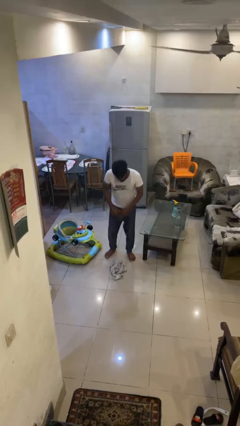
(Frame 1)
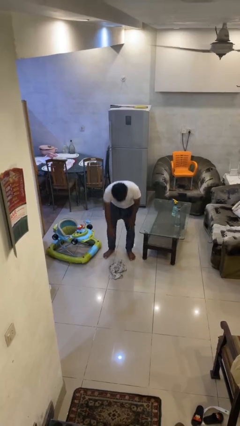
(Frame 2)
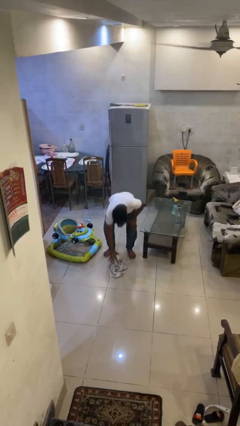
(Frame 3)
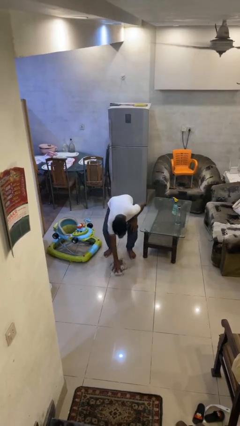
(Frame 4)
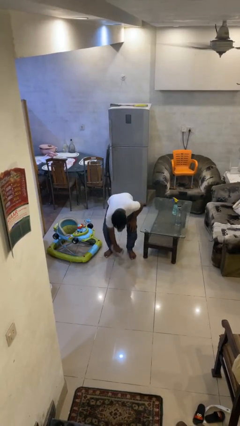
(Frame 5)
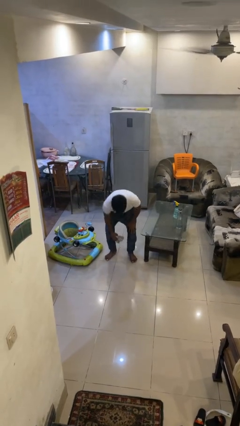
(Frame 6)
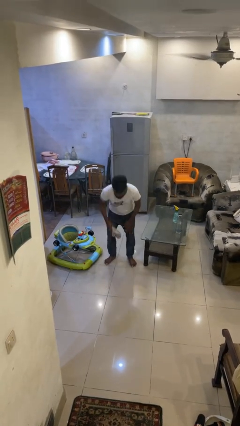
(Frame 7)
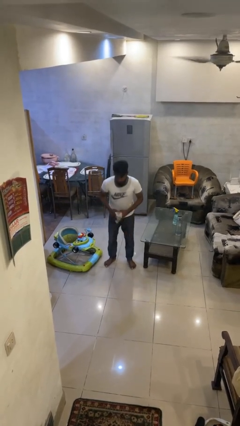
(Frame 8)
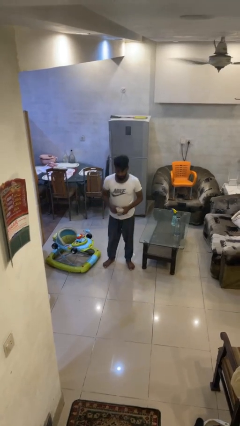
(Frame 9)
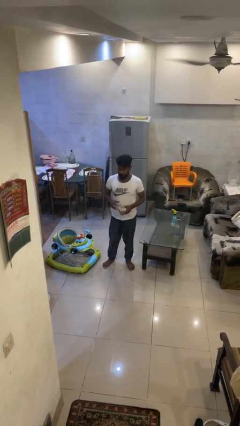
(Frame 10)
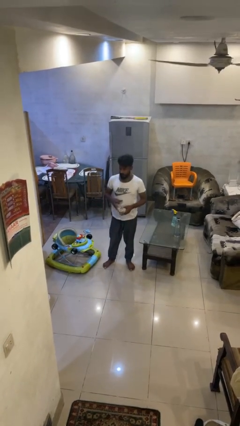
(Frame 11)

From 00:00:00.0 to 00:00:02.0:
person picks up object from floor

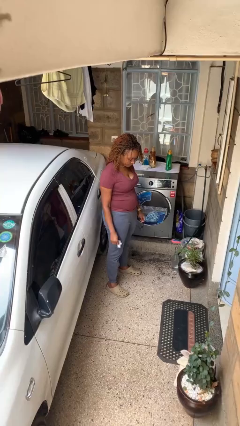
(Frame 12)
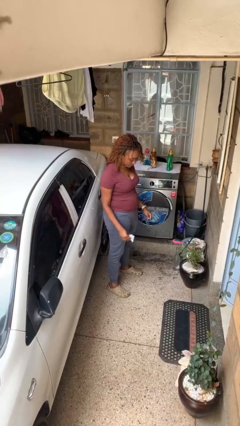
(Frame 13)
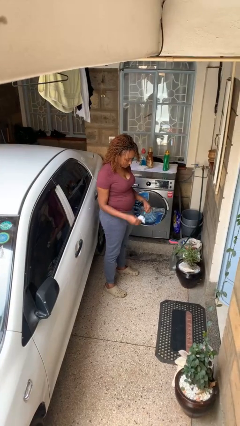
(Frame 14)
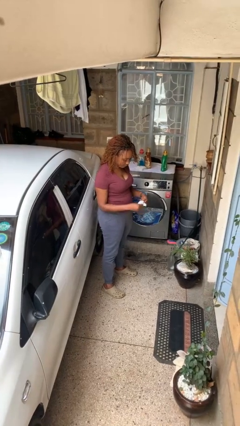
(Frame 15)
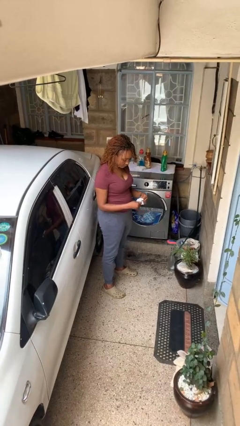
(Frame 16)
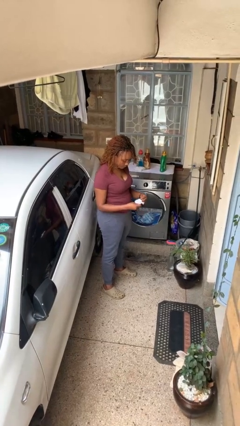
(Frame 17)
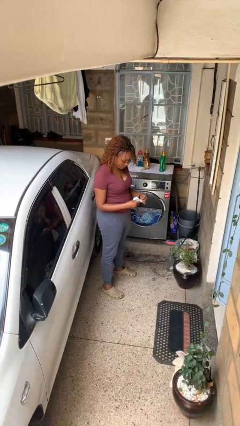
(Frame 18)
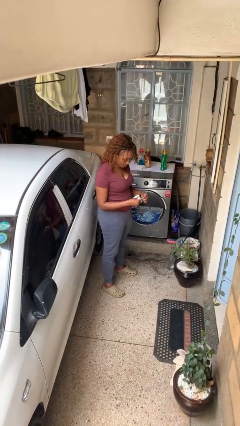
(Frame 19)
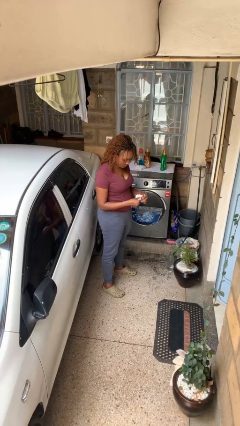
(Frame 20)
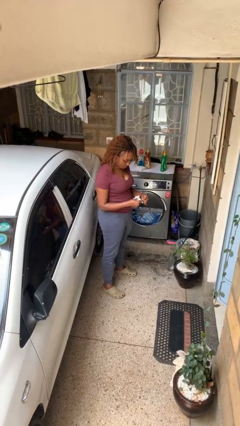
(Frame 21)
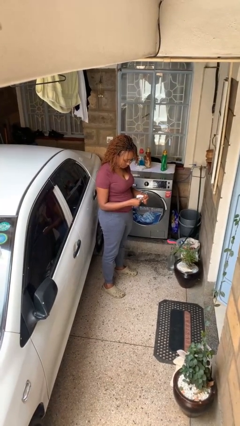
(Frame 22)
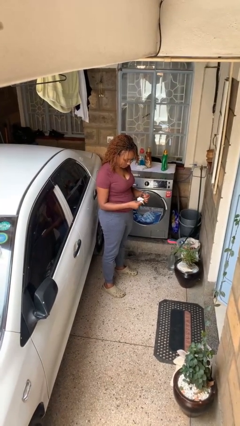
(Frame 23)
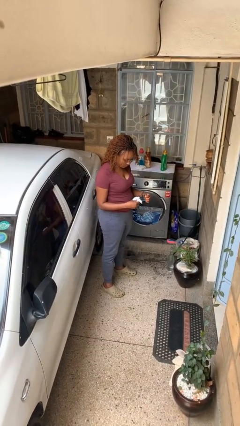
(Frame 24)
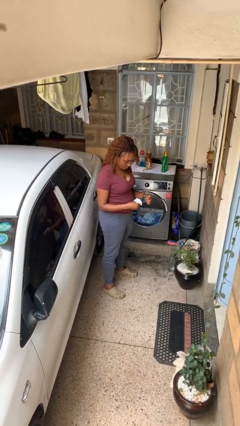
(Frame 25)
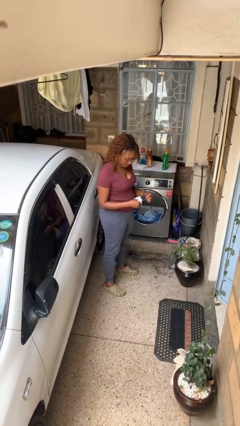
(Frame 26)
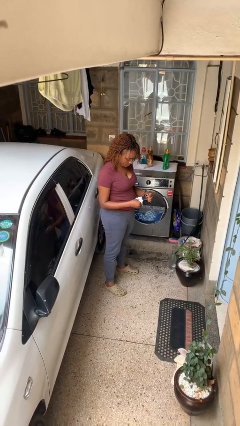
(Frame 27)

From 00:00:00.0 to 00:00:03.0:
person cleans eyeglasses

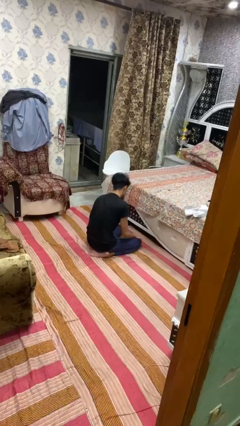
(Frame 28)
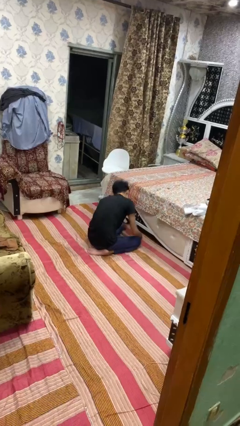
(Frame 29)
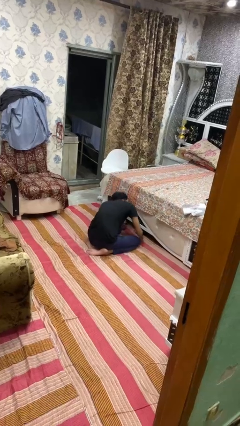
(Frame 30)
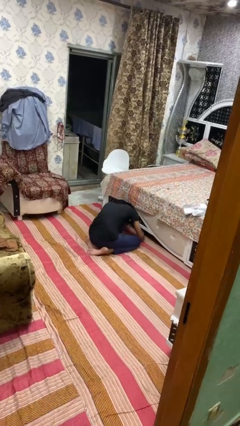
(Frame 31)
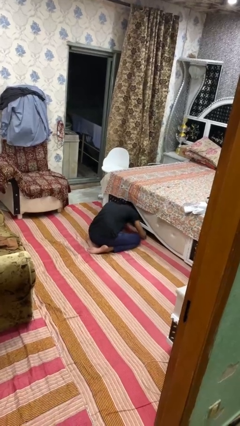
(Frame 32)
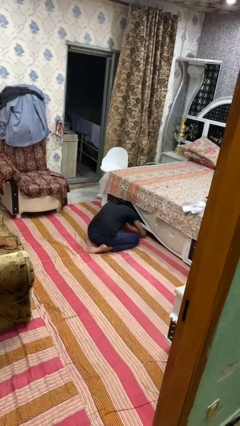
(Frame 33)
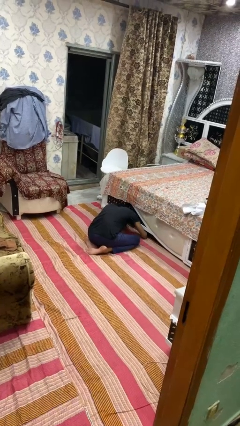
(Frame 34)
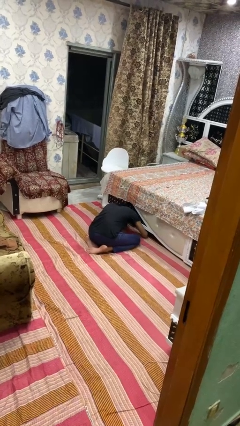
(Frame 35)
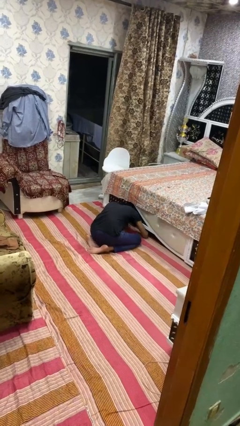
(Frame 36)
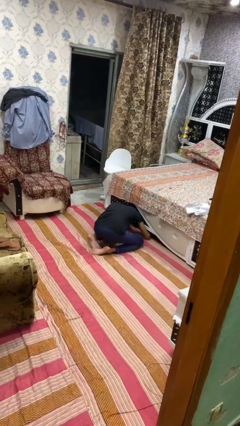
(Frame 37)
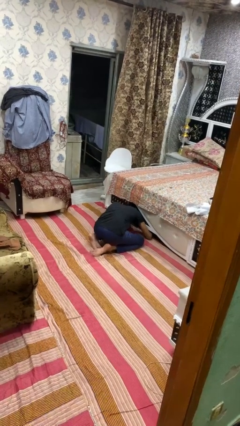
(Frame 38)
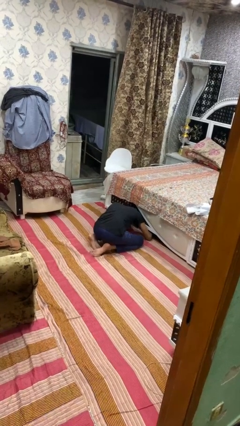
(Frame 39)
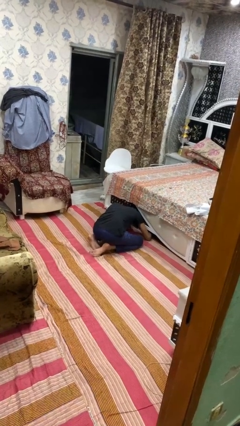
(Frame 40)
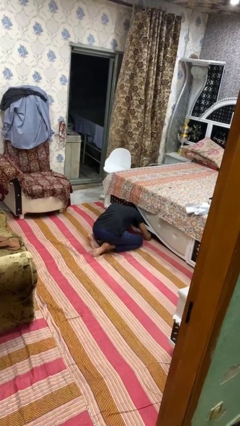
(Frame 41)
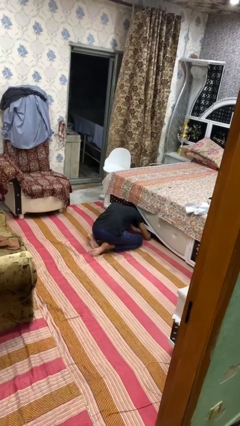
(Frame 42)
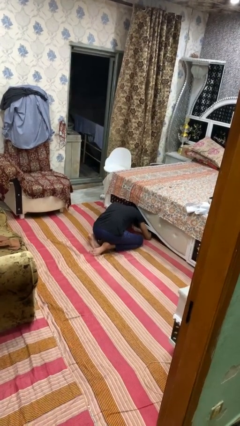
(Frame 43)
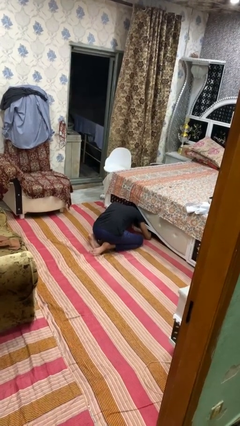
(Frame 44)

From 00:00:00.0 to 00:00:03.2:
person searches under bed

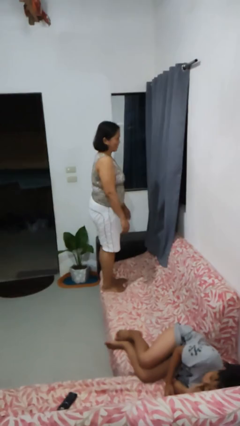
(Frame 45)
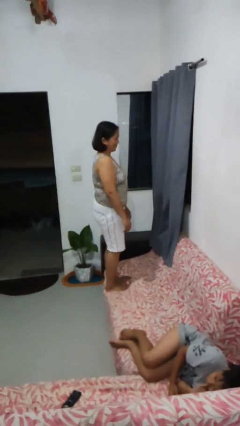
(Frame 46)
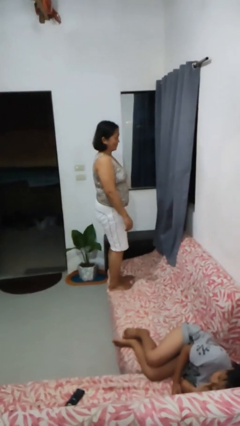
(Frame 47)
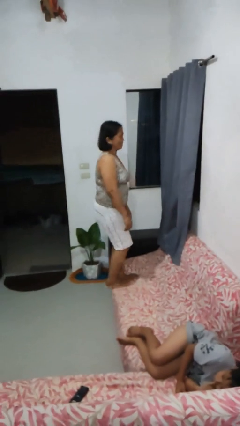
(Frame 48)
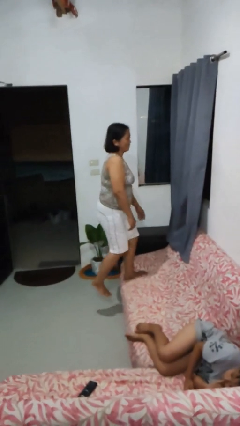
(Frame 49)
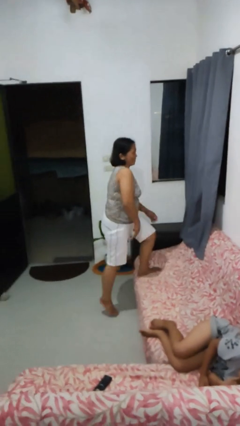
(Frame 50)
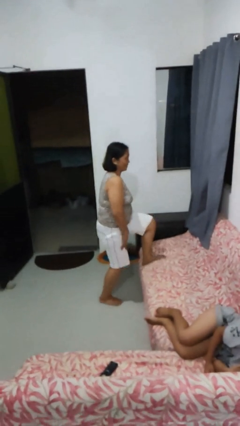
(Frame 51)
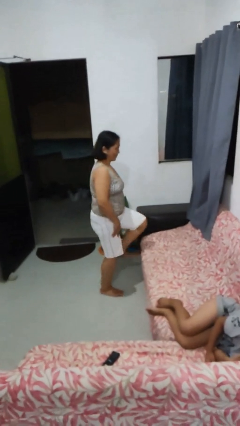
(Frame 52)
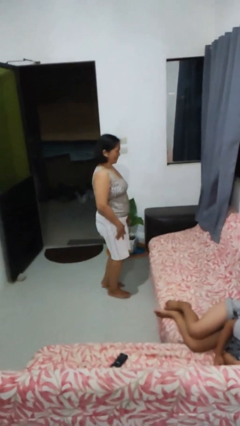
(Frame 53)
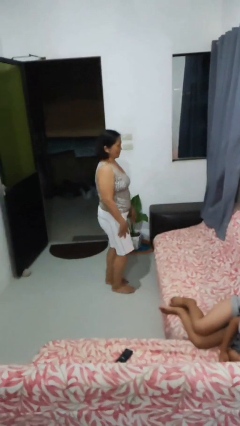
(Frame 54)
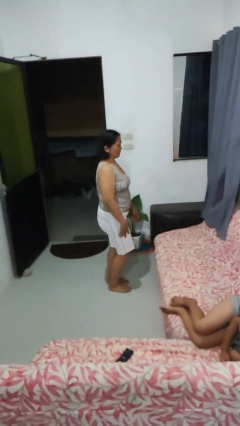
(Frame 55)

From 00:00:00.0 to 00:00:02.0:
person climbs off couch

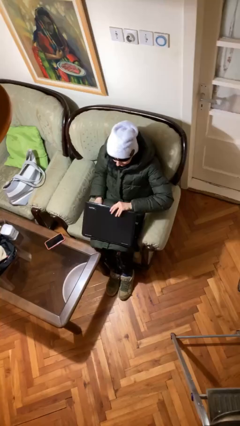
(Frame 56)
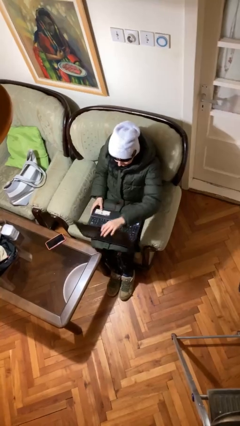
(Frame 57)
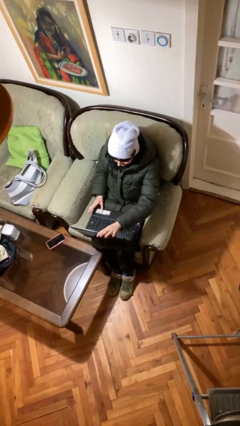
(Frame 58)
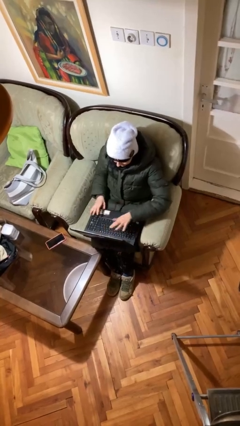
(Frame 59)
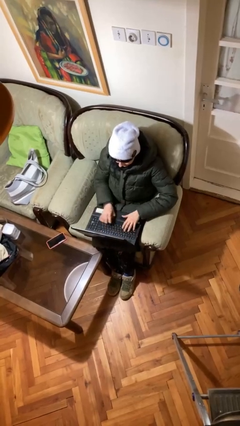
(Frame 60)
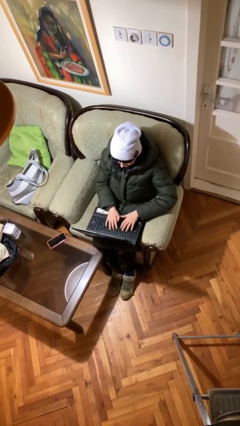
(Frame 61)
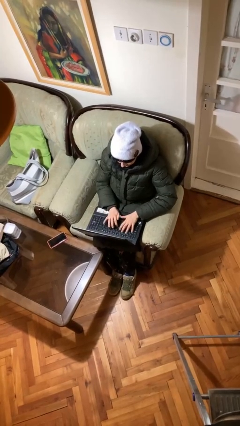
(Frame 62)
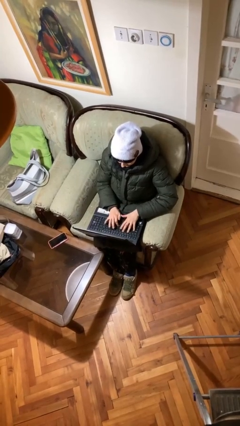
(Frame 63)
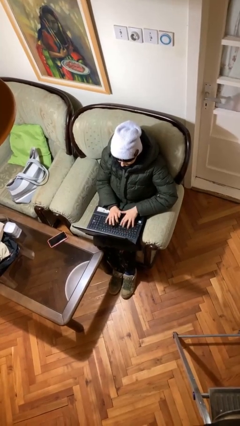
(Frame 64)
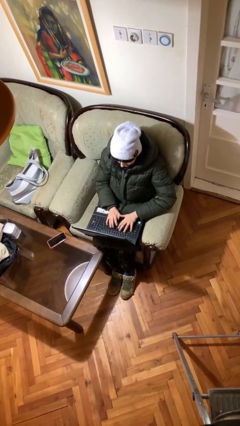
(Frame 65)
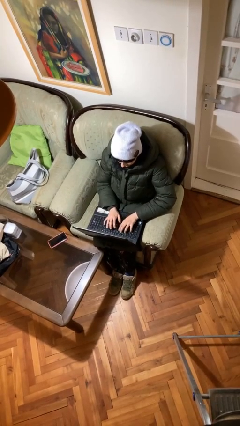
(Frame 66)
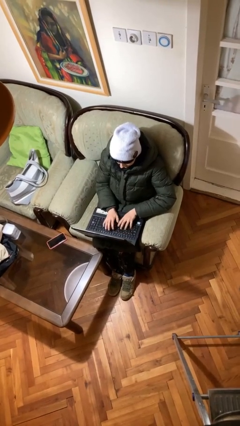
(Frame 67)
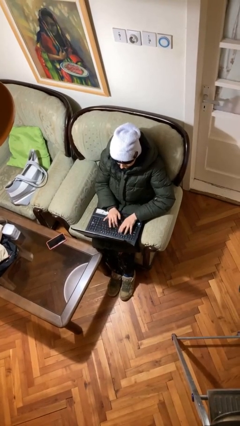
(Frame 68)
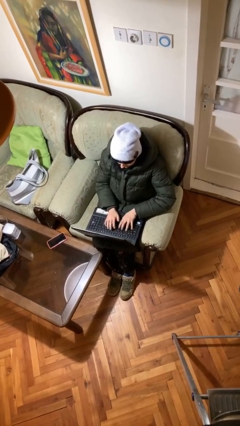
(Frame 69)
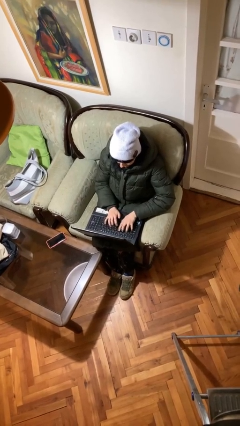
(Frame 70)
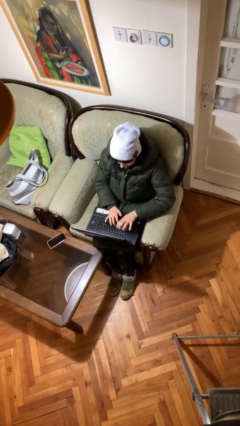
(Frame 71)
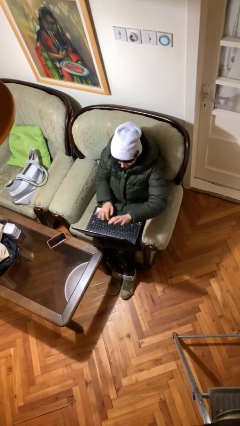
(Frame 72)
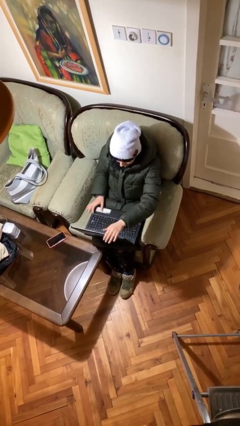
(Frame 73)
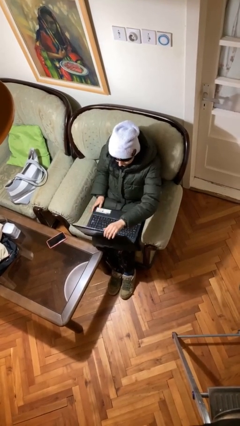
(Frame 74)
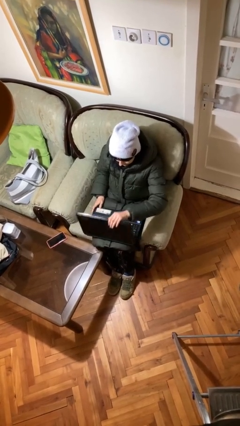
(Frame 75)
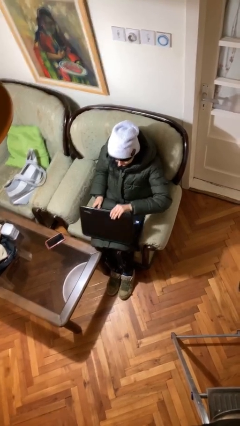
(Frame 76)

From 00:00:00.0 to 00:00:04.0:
person interacts with laptop

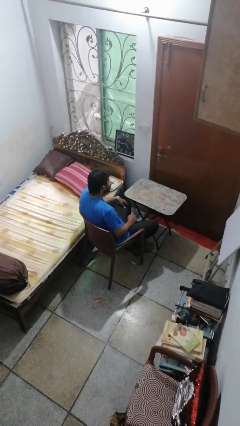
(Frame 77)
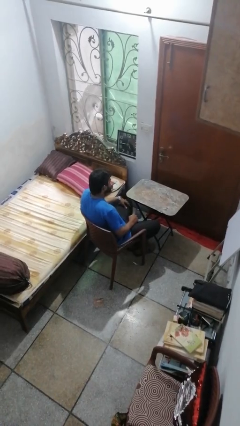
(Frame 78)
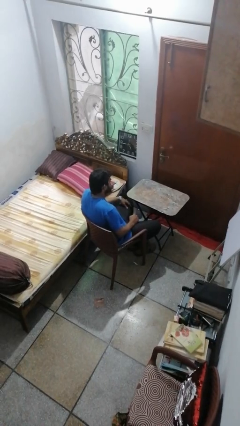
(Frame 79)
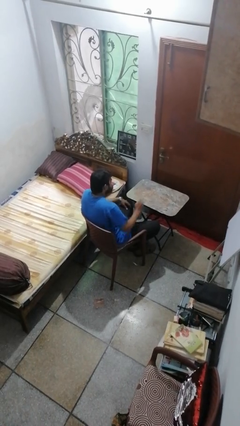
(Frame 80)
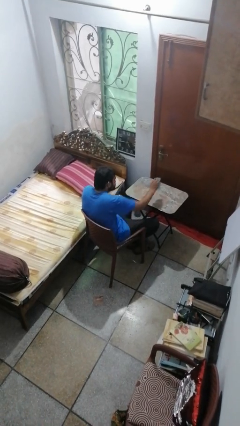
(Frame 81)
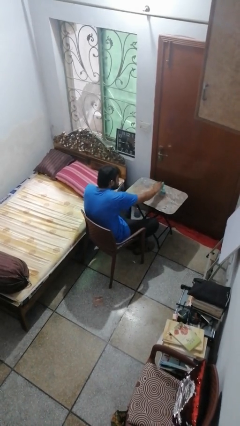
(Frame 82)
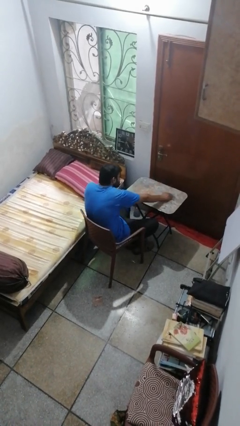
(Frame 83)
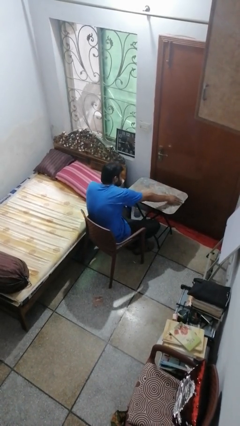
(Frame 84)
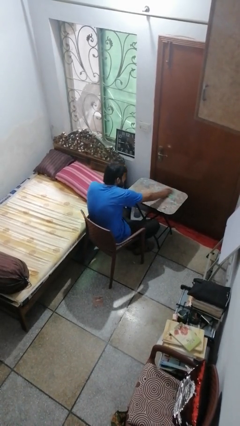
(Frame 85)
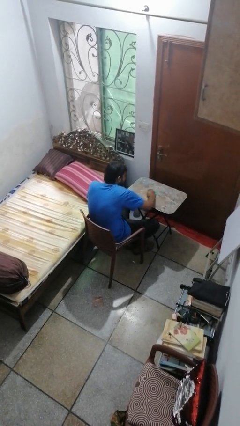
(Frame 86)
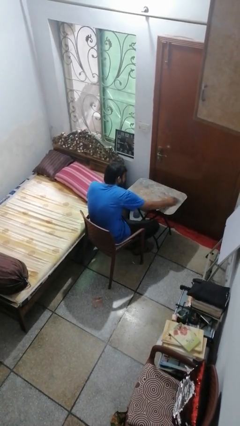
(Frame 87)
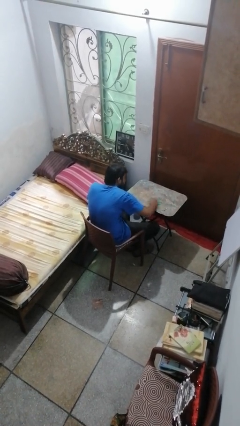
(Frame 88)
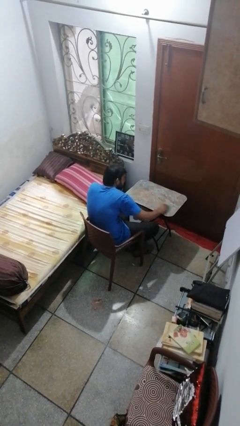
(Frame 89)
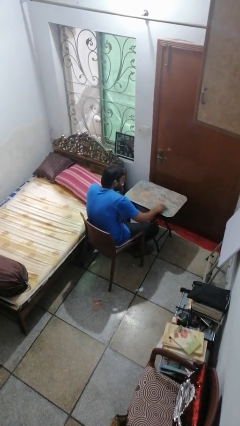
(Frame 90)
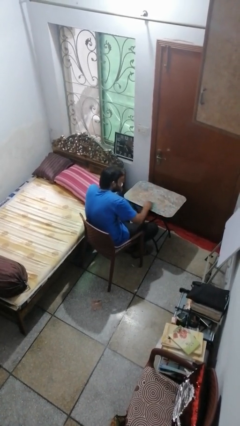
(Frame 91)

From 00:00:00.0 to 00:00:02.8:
person cleans table with rag

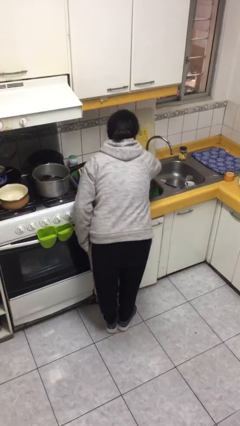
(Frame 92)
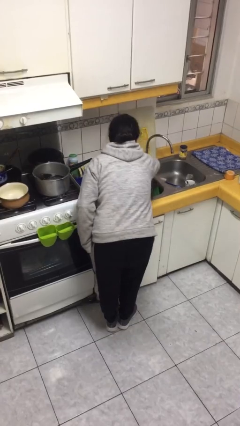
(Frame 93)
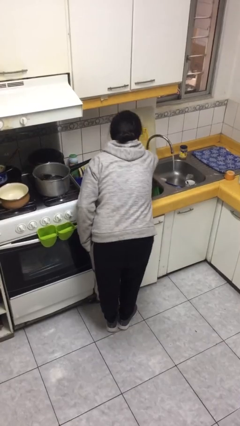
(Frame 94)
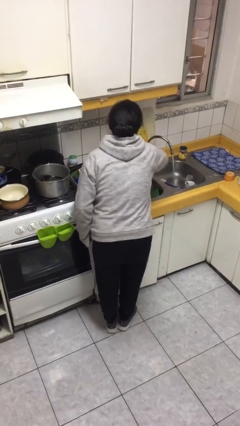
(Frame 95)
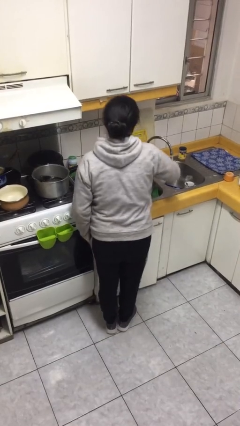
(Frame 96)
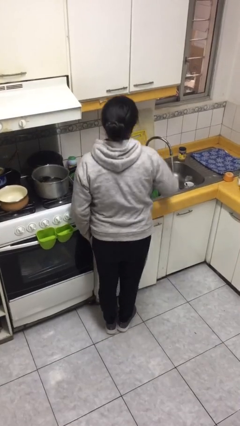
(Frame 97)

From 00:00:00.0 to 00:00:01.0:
person turns on faucet
